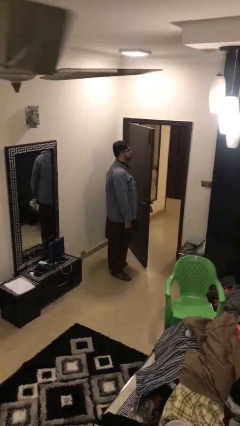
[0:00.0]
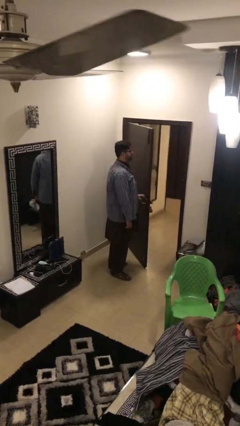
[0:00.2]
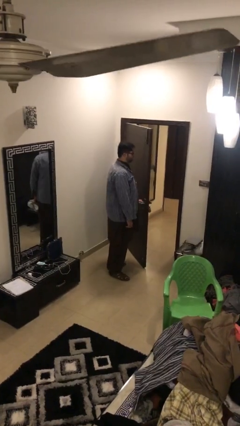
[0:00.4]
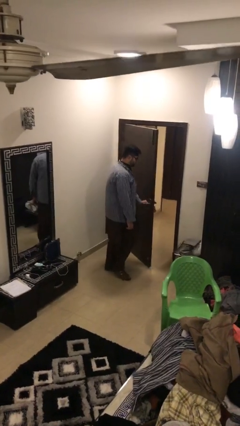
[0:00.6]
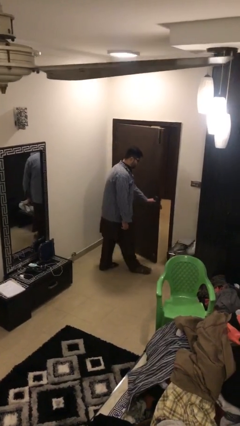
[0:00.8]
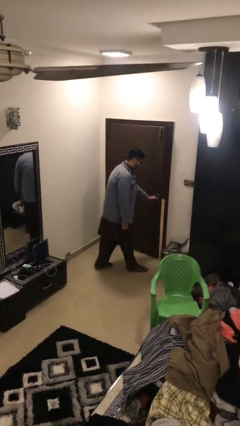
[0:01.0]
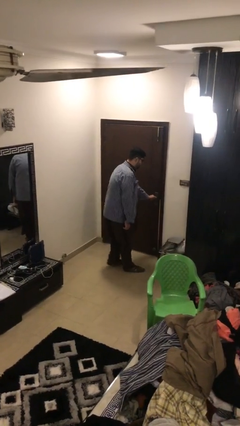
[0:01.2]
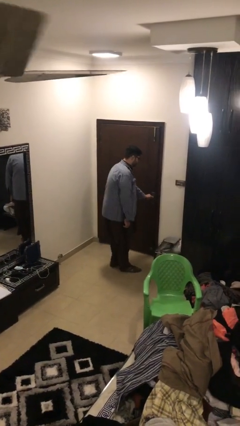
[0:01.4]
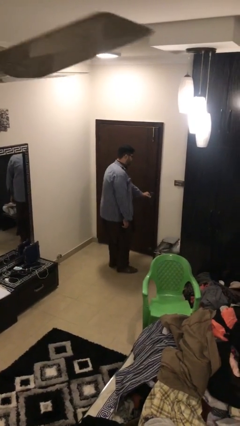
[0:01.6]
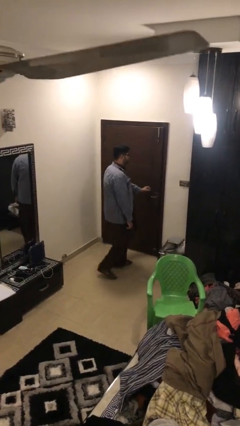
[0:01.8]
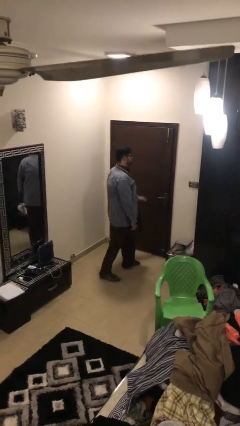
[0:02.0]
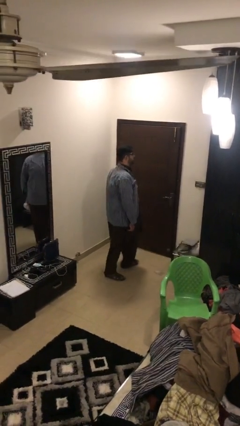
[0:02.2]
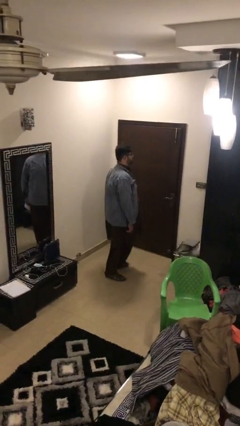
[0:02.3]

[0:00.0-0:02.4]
person closes facility door

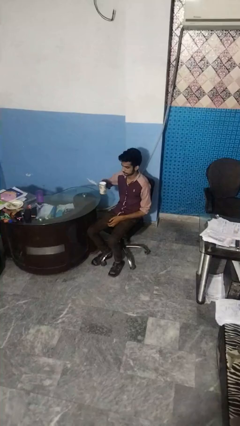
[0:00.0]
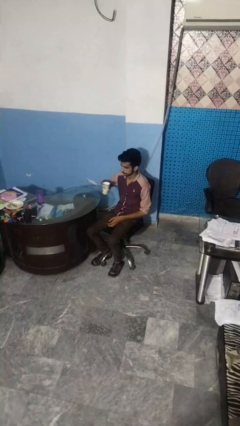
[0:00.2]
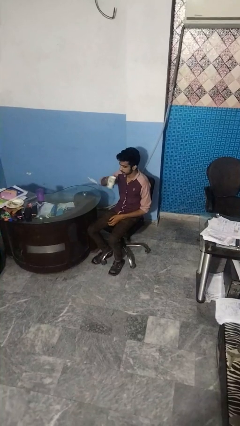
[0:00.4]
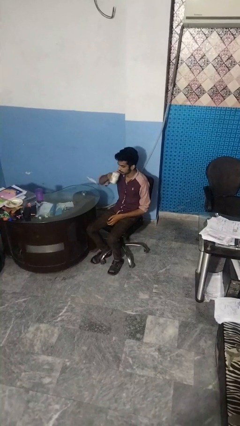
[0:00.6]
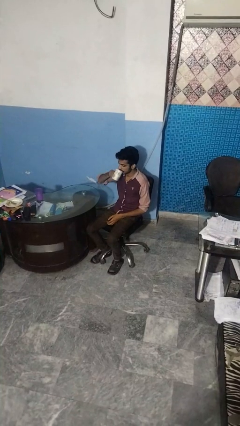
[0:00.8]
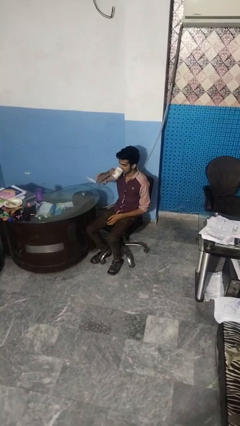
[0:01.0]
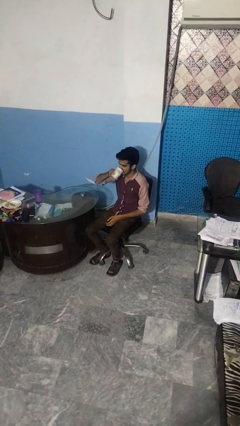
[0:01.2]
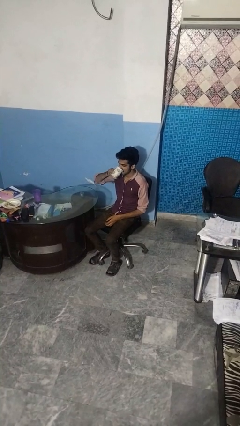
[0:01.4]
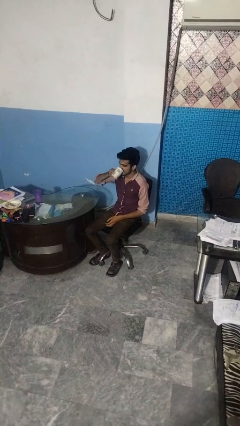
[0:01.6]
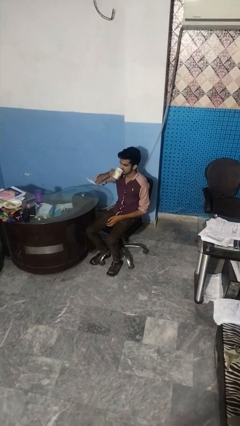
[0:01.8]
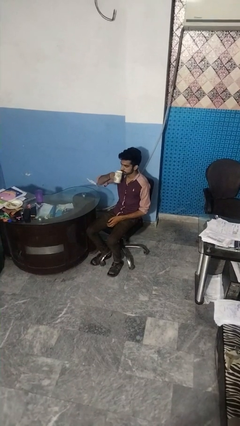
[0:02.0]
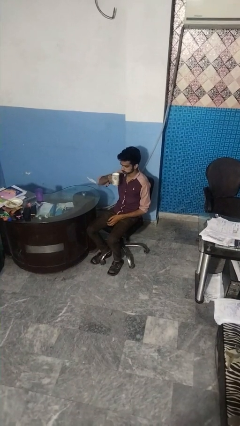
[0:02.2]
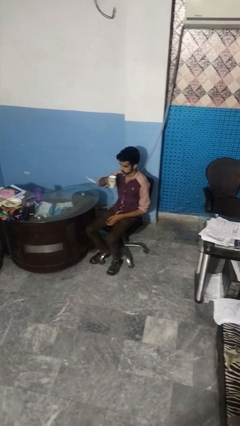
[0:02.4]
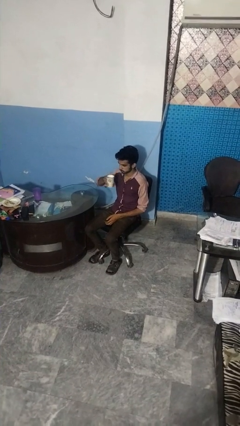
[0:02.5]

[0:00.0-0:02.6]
person drinks from mug

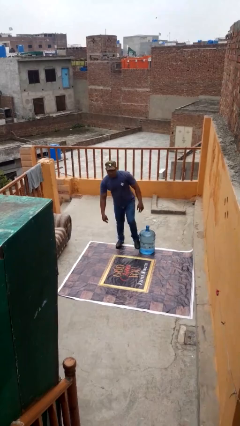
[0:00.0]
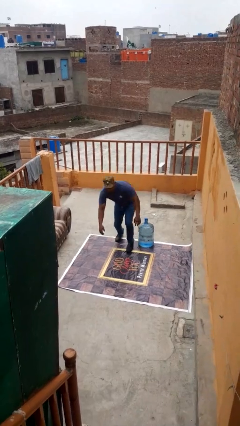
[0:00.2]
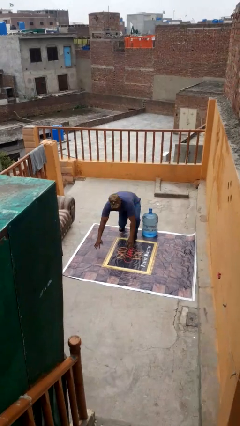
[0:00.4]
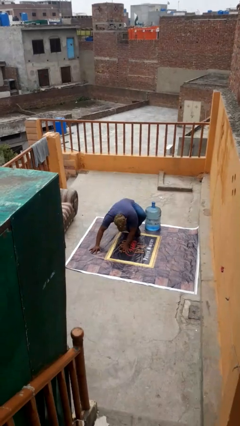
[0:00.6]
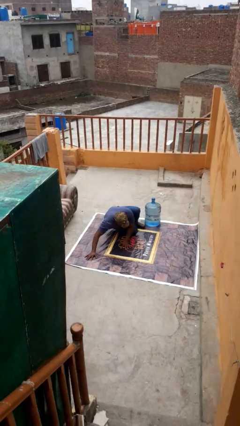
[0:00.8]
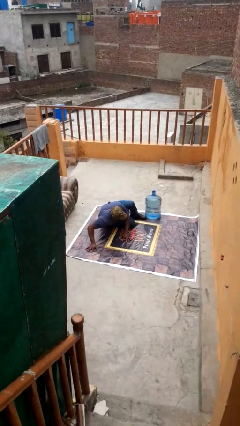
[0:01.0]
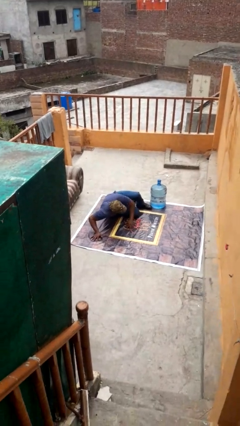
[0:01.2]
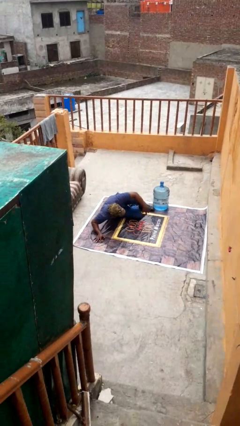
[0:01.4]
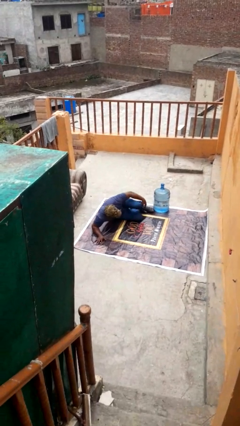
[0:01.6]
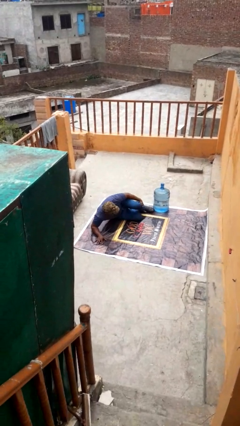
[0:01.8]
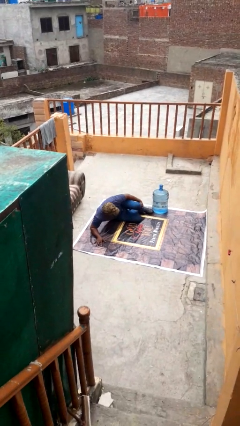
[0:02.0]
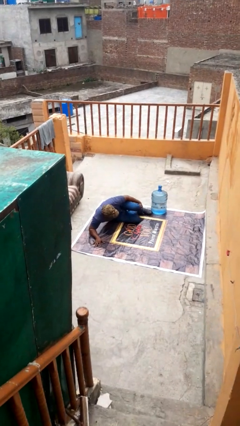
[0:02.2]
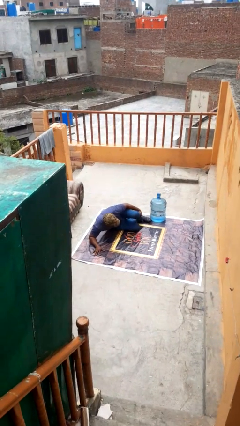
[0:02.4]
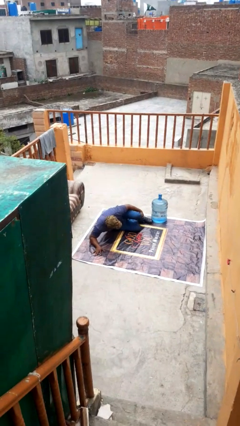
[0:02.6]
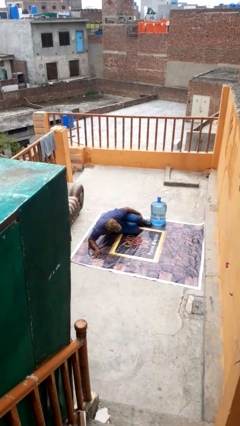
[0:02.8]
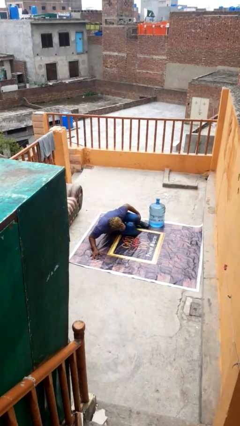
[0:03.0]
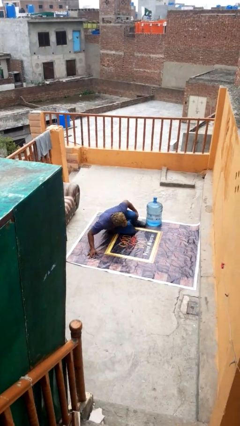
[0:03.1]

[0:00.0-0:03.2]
person lies down on floor

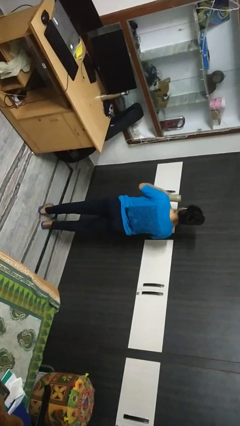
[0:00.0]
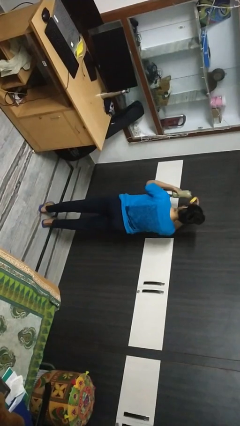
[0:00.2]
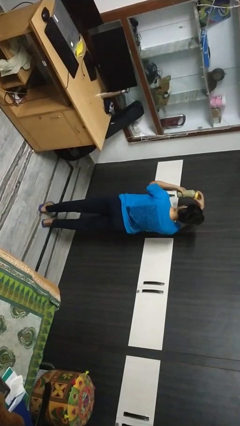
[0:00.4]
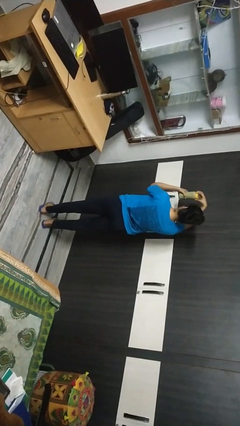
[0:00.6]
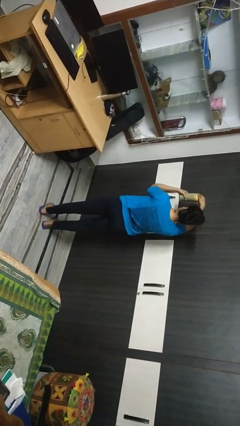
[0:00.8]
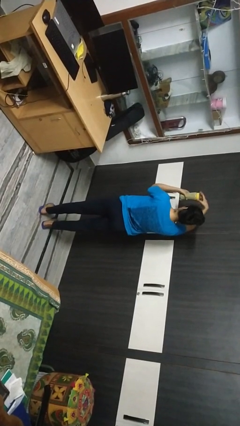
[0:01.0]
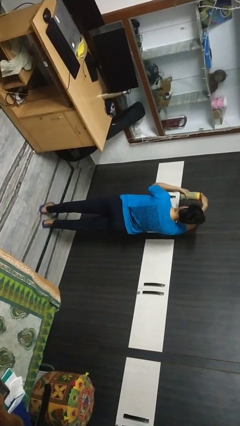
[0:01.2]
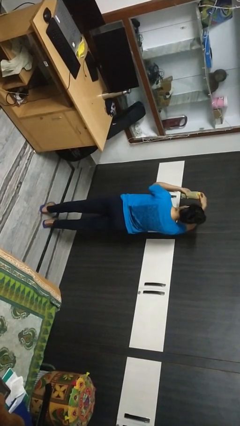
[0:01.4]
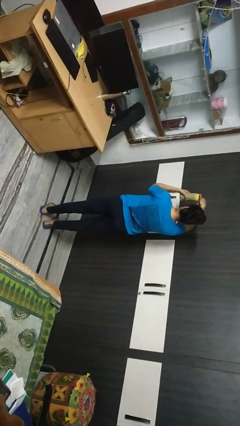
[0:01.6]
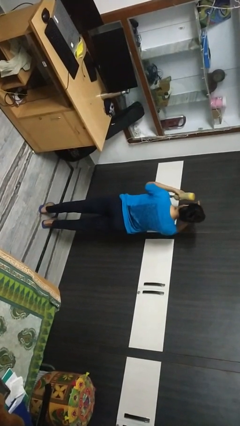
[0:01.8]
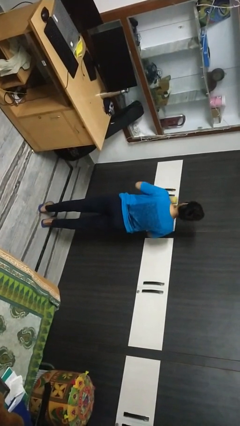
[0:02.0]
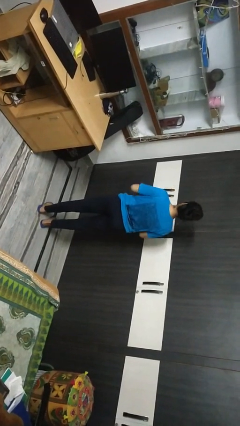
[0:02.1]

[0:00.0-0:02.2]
person closes jar

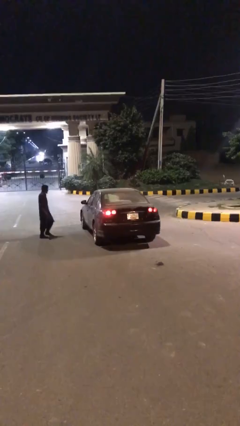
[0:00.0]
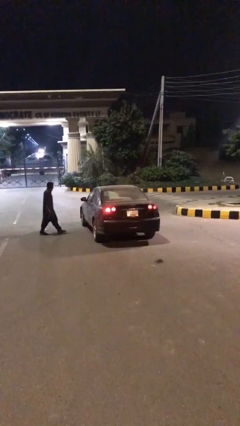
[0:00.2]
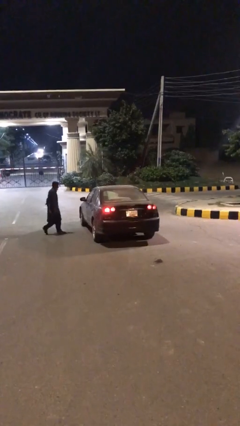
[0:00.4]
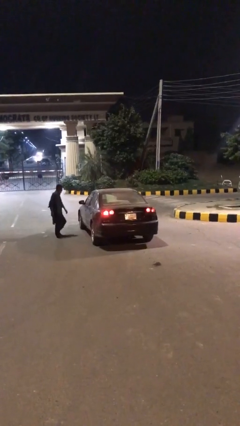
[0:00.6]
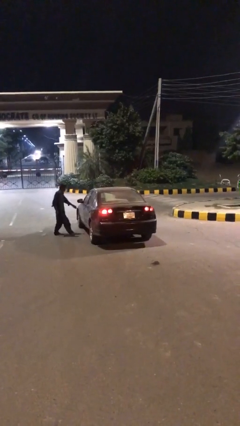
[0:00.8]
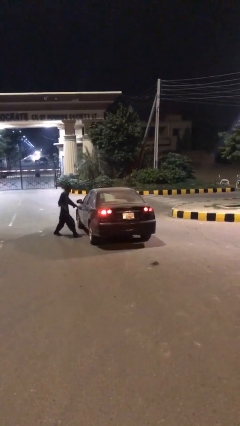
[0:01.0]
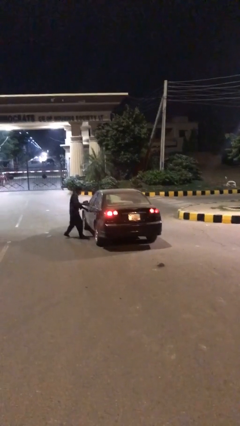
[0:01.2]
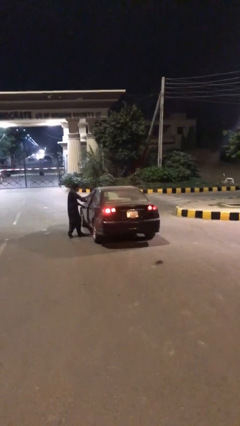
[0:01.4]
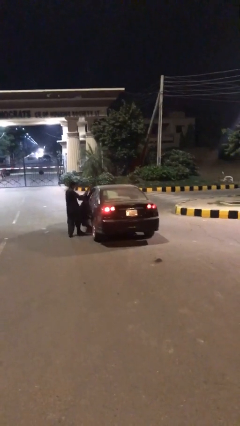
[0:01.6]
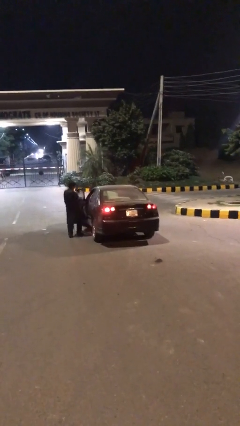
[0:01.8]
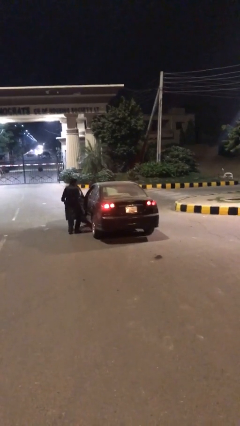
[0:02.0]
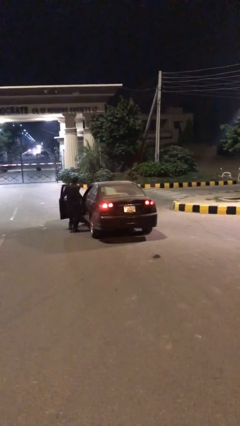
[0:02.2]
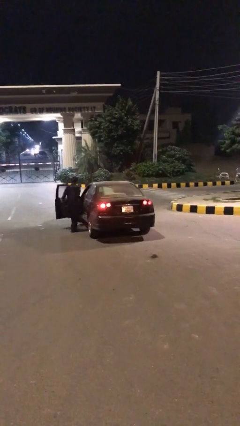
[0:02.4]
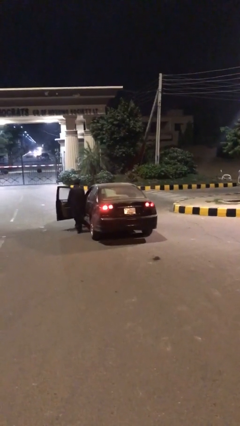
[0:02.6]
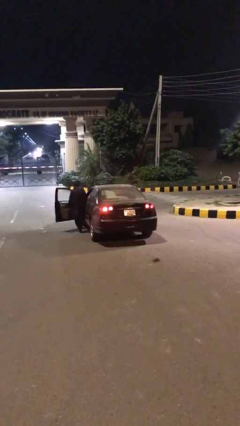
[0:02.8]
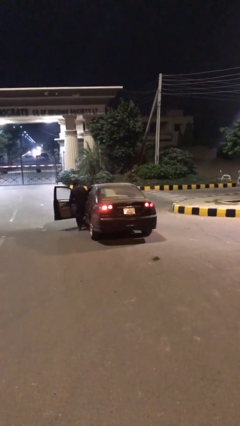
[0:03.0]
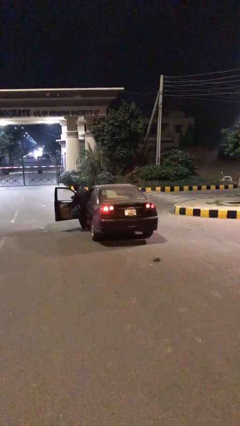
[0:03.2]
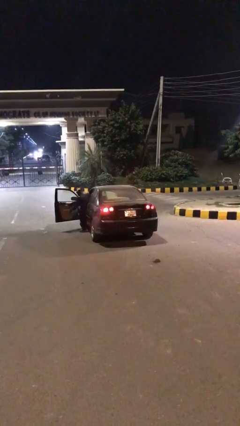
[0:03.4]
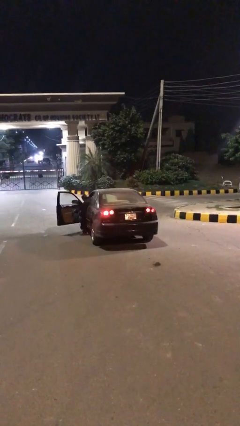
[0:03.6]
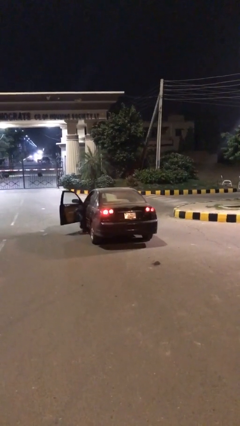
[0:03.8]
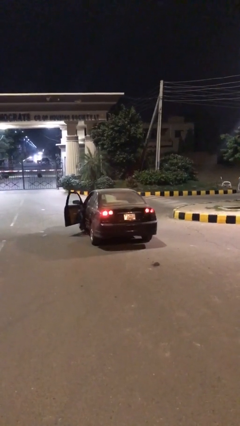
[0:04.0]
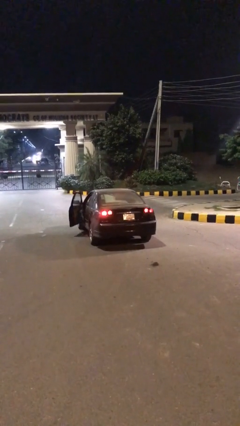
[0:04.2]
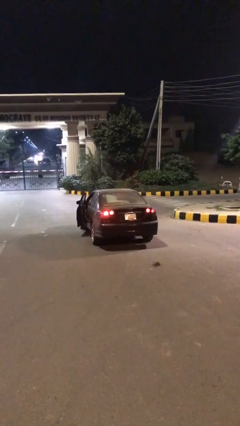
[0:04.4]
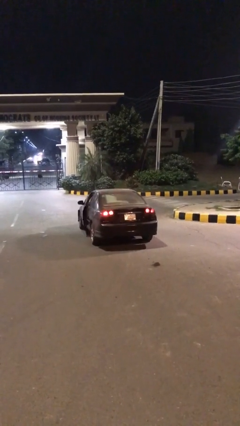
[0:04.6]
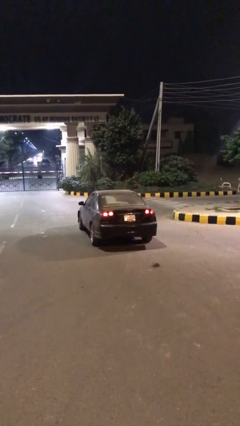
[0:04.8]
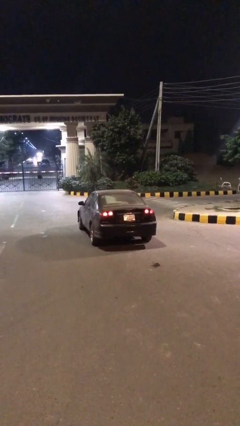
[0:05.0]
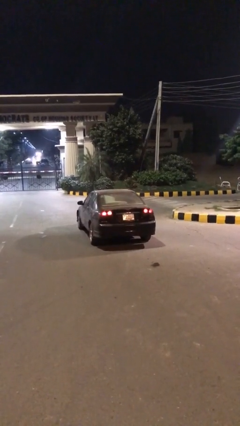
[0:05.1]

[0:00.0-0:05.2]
car picks up person

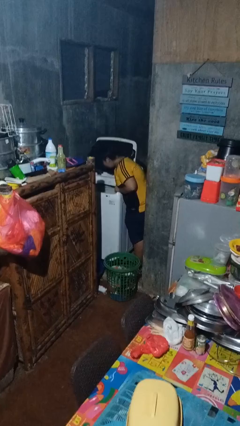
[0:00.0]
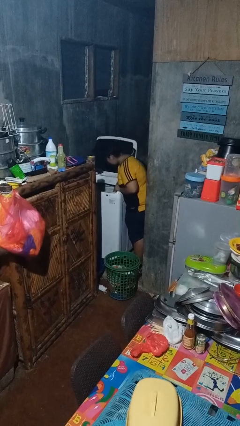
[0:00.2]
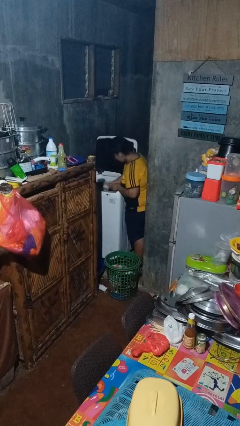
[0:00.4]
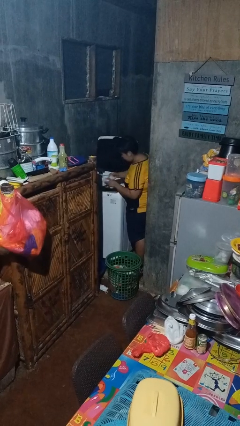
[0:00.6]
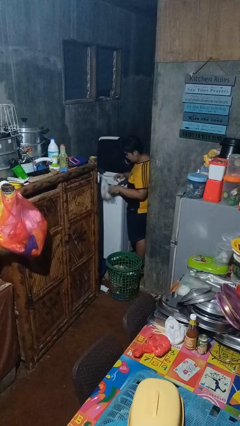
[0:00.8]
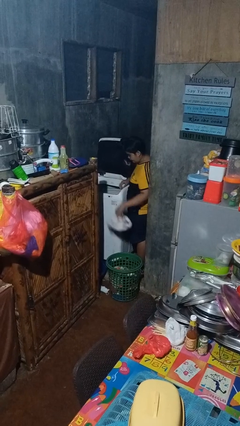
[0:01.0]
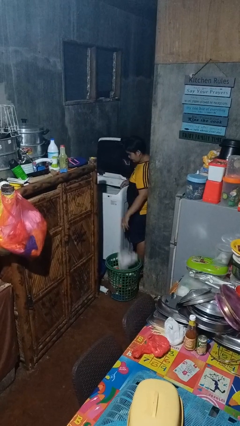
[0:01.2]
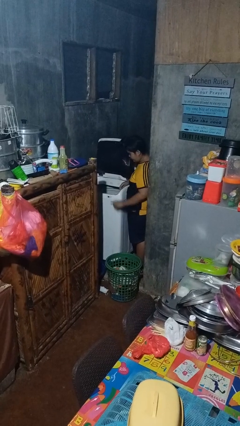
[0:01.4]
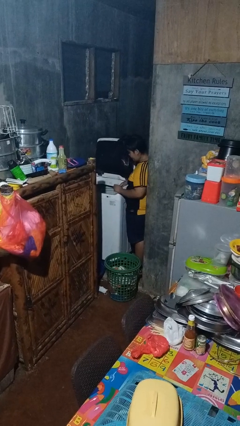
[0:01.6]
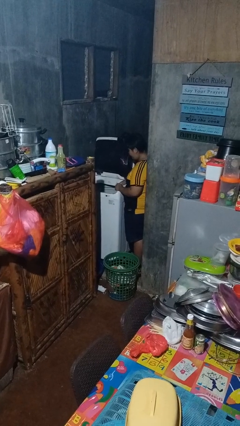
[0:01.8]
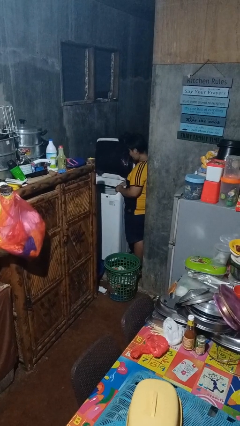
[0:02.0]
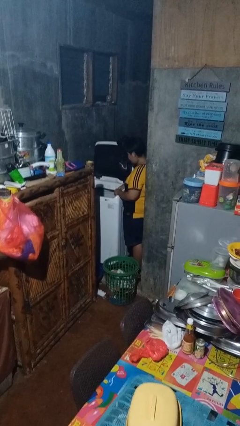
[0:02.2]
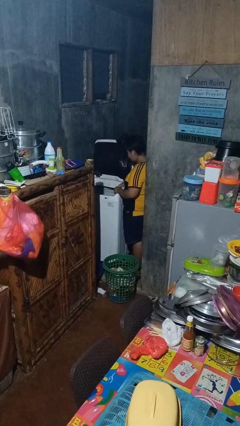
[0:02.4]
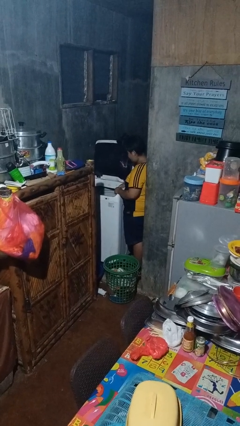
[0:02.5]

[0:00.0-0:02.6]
person unloads clotheswasher
